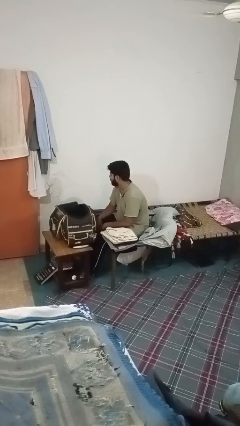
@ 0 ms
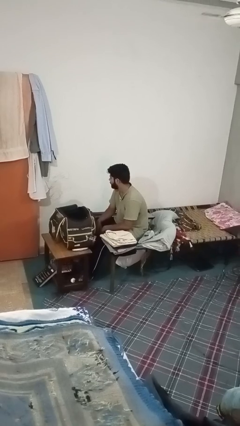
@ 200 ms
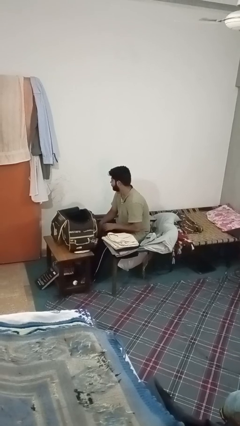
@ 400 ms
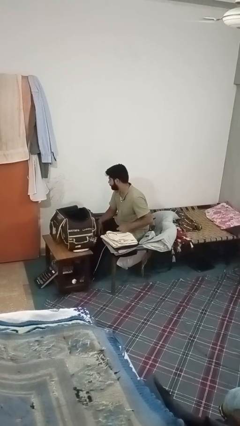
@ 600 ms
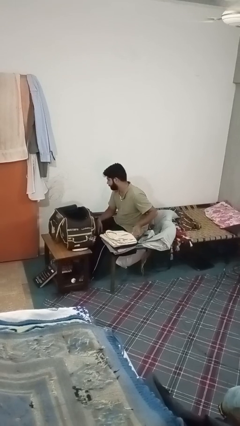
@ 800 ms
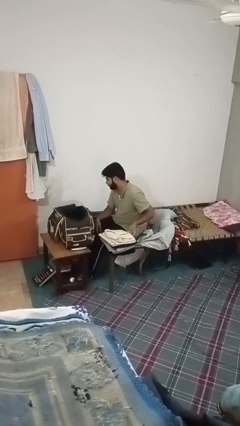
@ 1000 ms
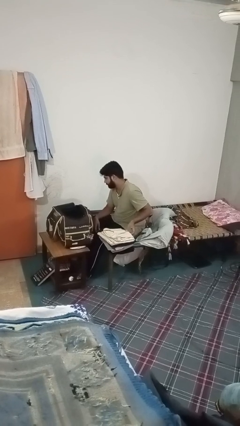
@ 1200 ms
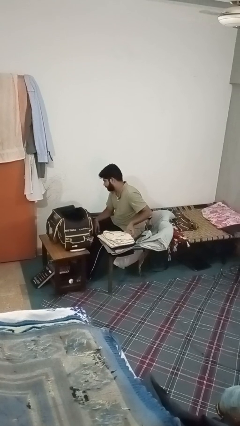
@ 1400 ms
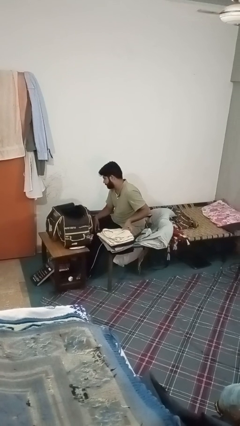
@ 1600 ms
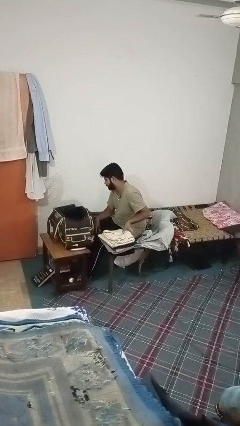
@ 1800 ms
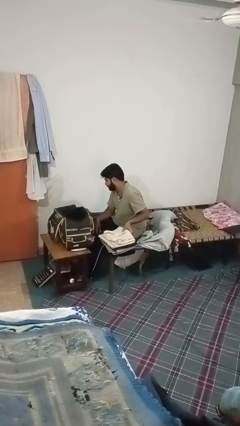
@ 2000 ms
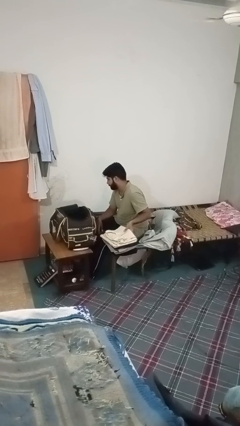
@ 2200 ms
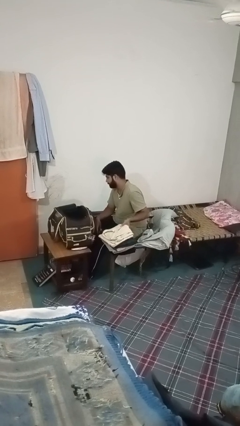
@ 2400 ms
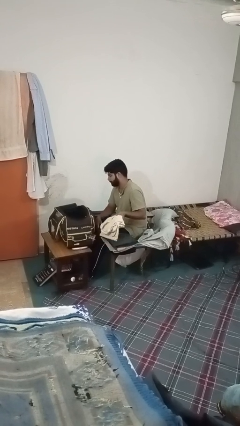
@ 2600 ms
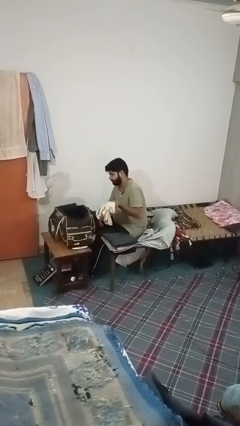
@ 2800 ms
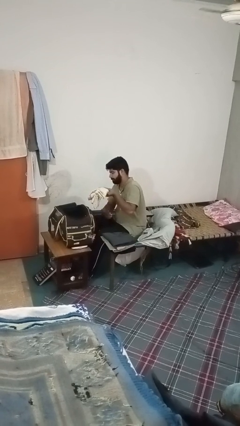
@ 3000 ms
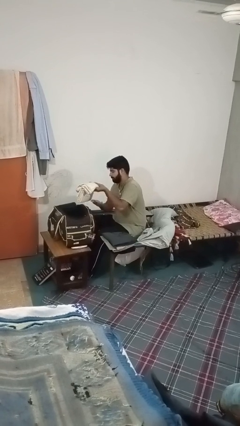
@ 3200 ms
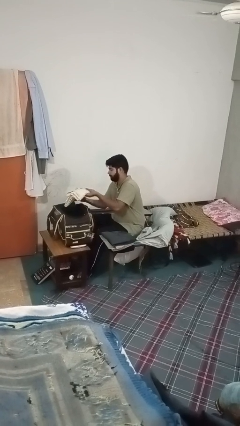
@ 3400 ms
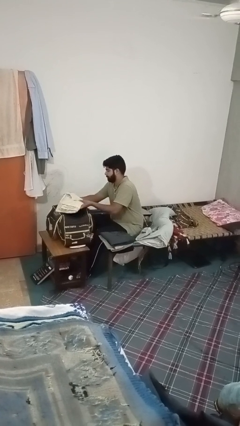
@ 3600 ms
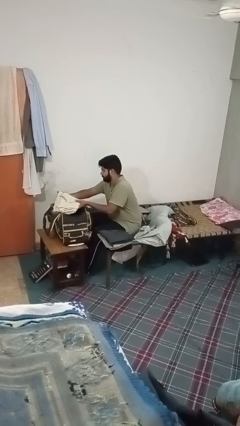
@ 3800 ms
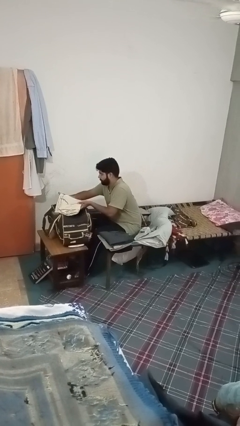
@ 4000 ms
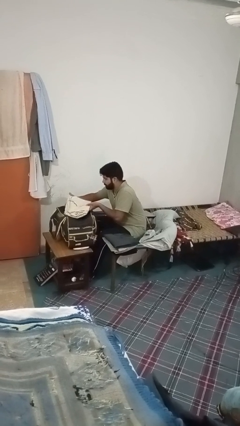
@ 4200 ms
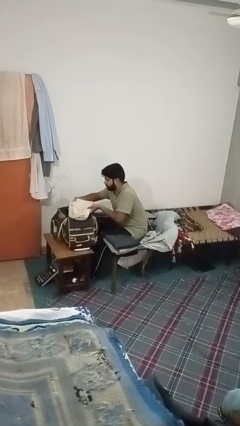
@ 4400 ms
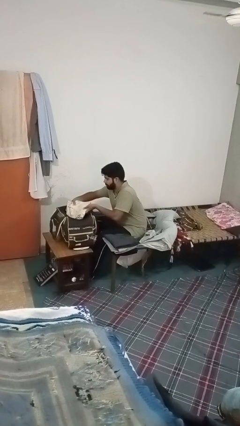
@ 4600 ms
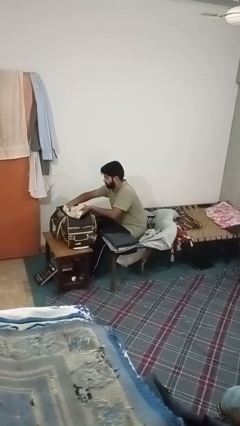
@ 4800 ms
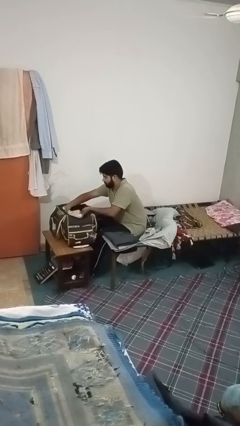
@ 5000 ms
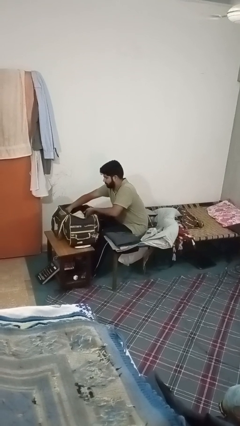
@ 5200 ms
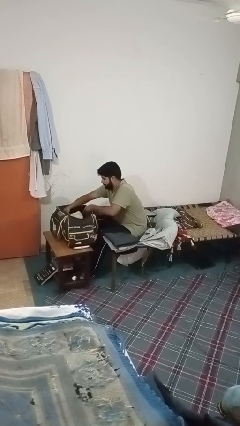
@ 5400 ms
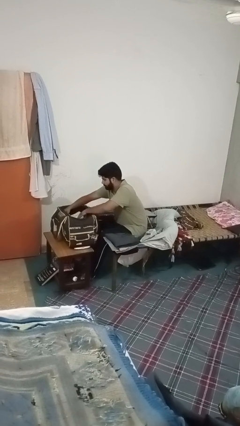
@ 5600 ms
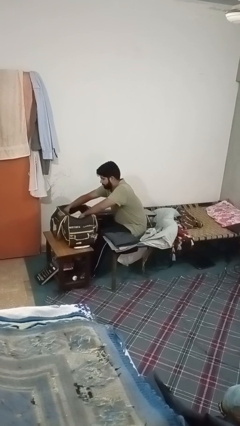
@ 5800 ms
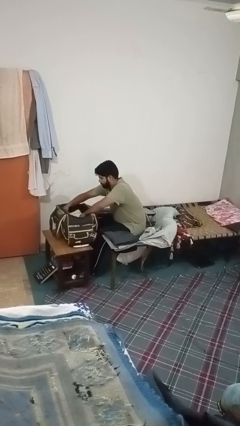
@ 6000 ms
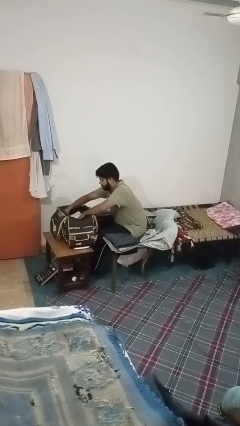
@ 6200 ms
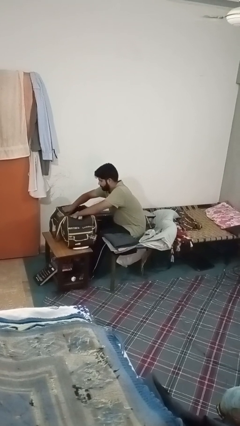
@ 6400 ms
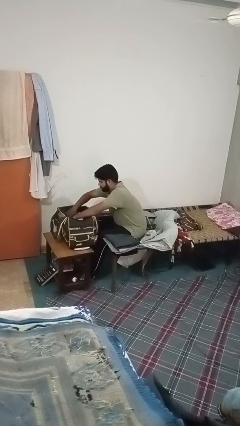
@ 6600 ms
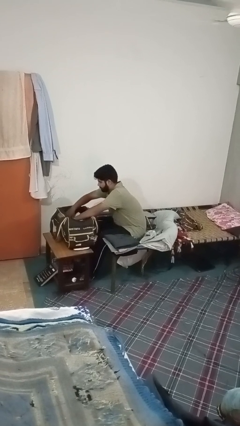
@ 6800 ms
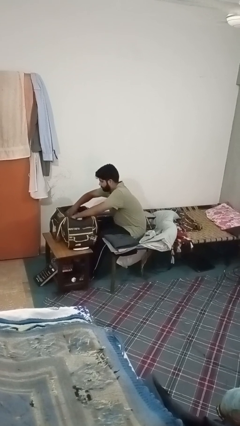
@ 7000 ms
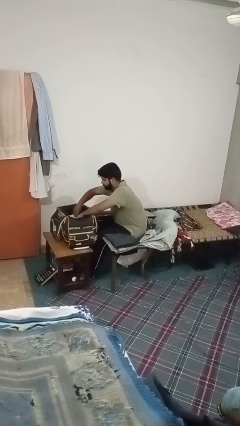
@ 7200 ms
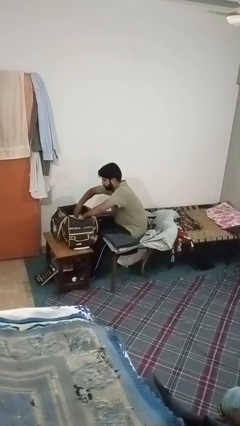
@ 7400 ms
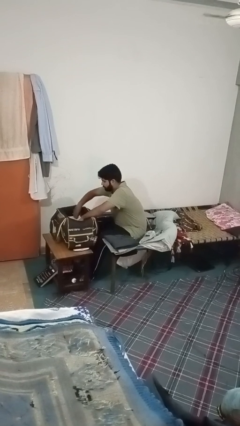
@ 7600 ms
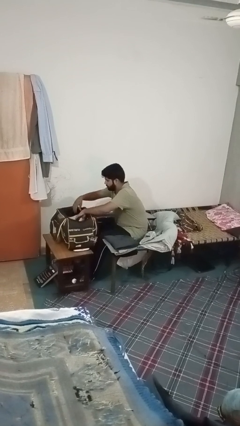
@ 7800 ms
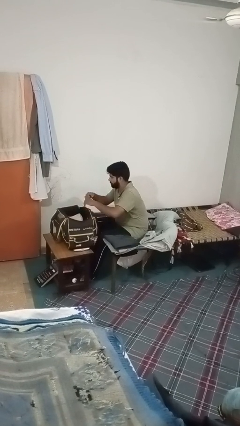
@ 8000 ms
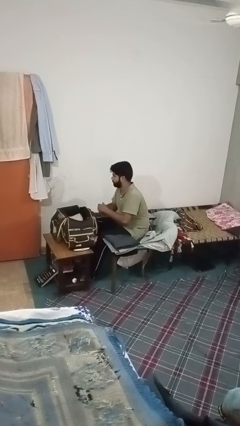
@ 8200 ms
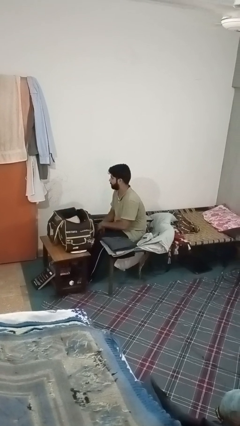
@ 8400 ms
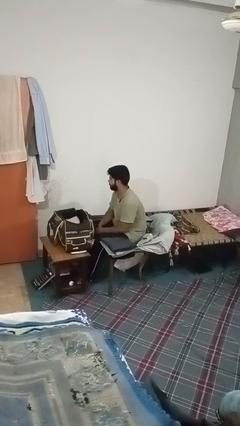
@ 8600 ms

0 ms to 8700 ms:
person loads clothes into suitcase

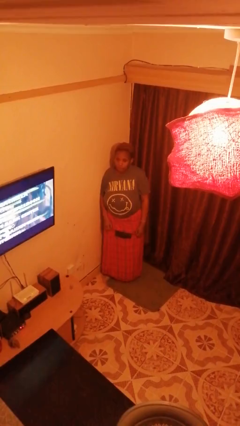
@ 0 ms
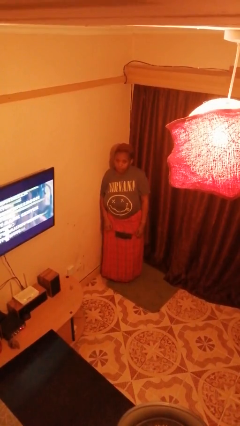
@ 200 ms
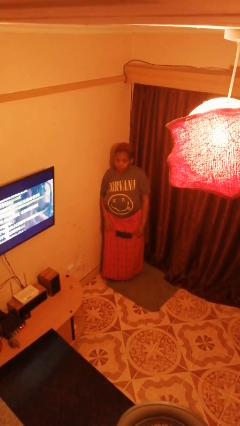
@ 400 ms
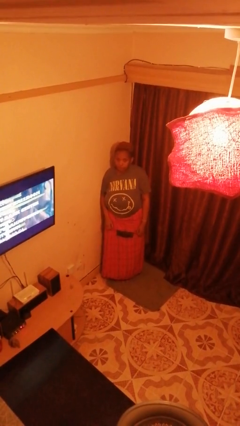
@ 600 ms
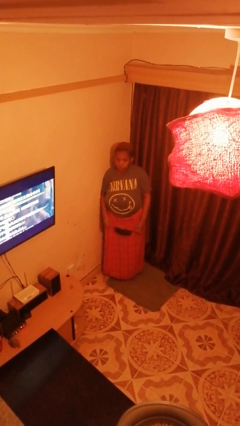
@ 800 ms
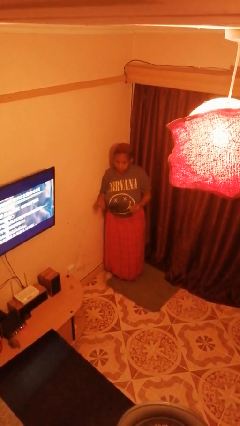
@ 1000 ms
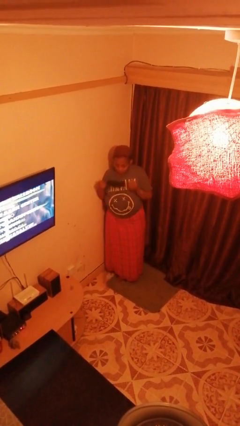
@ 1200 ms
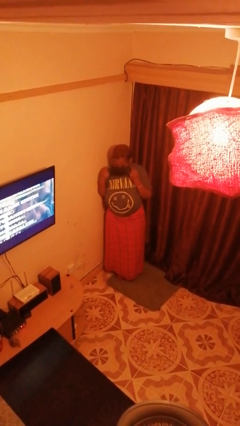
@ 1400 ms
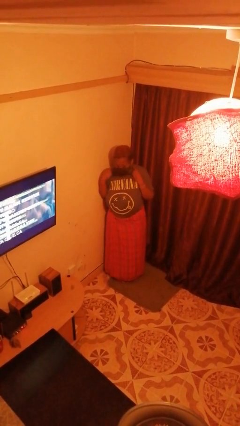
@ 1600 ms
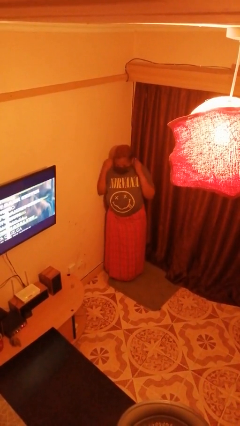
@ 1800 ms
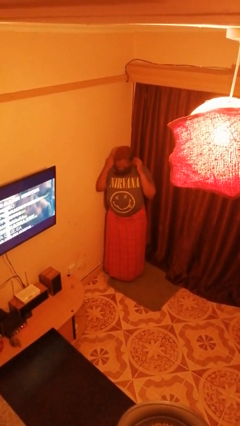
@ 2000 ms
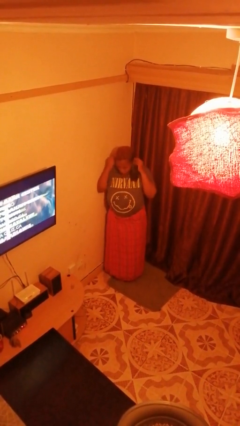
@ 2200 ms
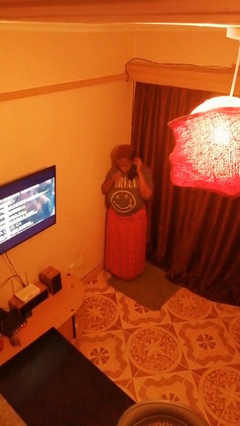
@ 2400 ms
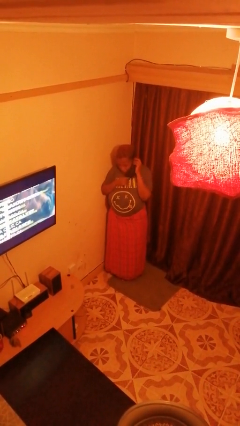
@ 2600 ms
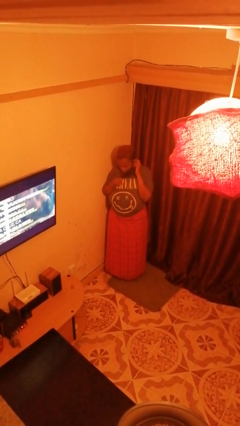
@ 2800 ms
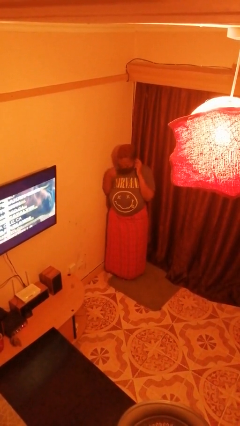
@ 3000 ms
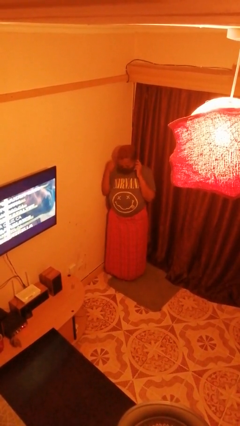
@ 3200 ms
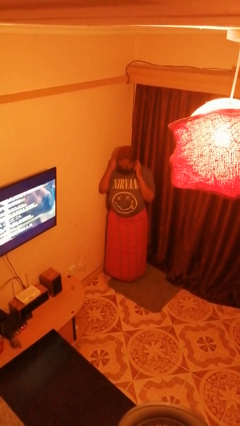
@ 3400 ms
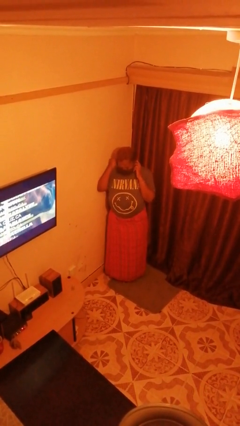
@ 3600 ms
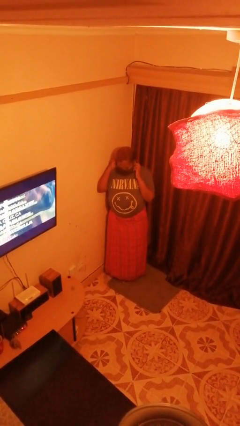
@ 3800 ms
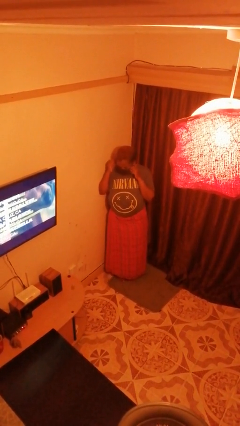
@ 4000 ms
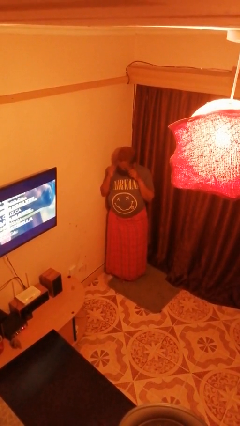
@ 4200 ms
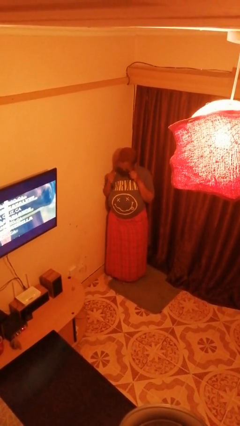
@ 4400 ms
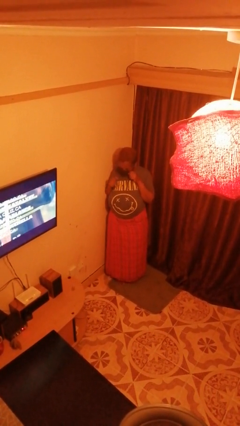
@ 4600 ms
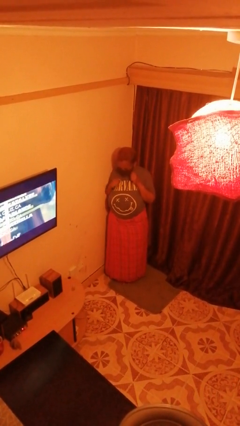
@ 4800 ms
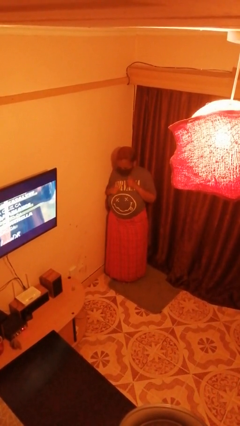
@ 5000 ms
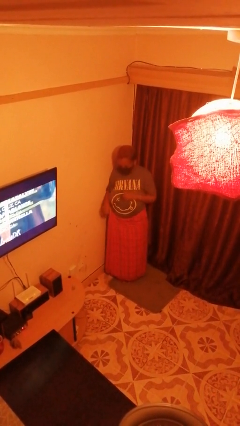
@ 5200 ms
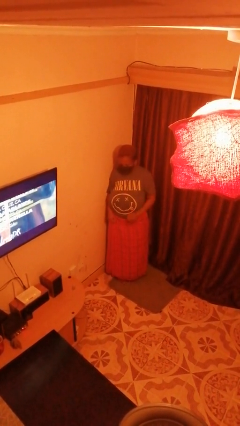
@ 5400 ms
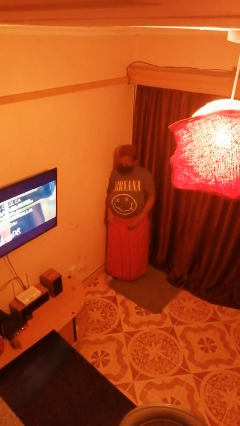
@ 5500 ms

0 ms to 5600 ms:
person puts on facemask

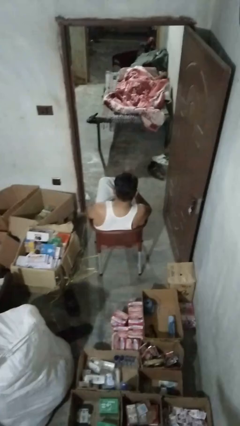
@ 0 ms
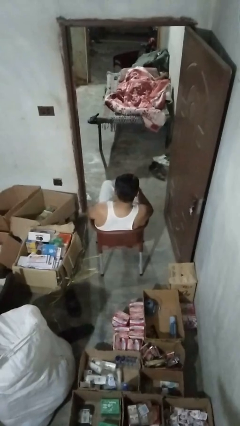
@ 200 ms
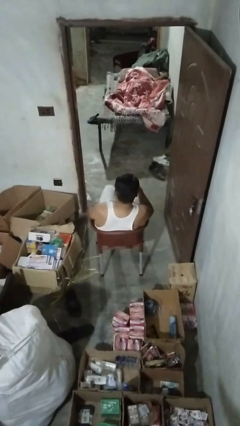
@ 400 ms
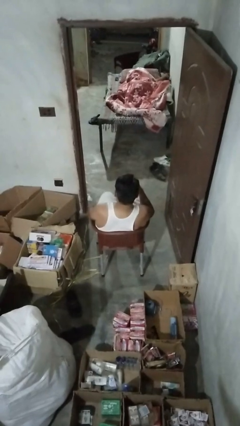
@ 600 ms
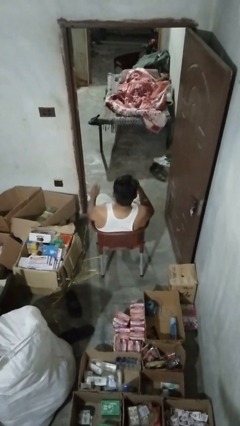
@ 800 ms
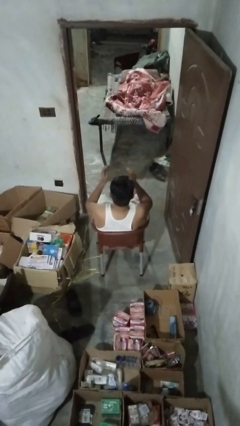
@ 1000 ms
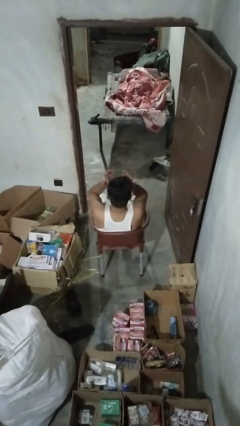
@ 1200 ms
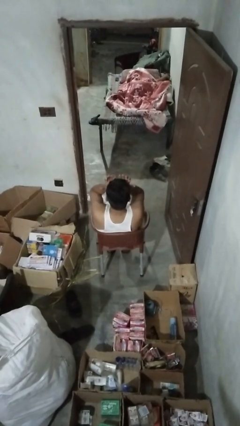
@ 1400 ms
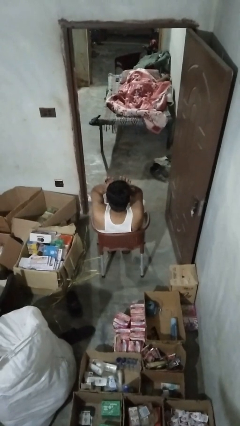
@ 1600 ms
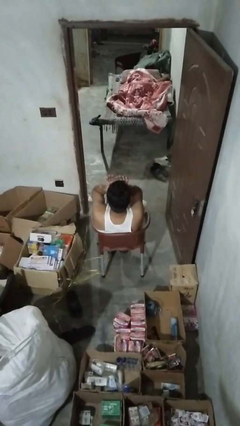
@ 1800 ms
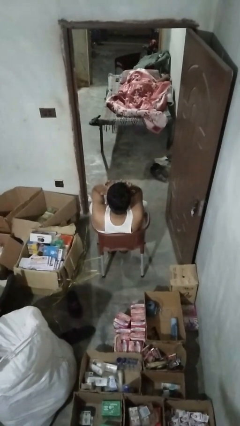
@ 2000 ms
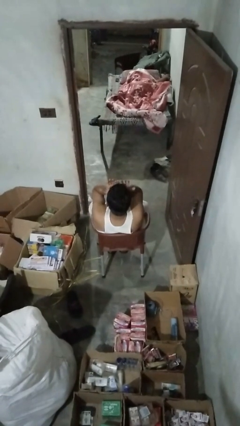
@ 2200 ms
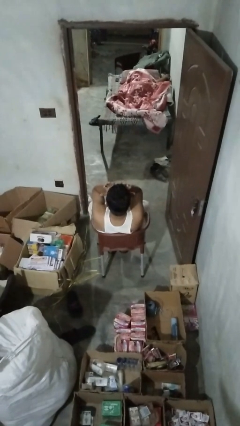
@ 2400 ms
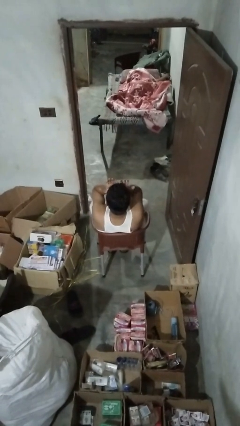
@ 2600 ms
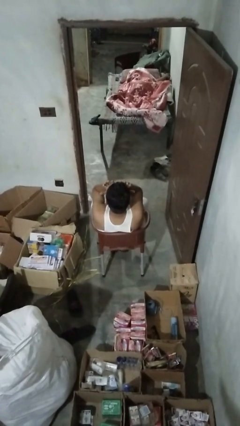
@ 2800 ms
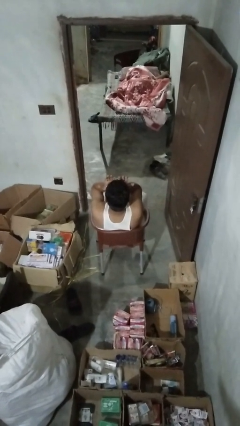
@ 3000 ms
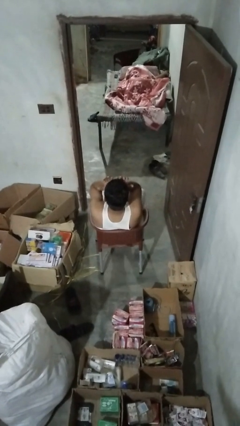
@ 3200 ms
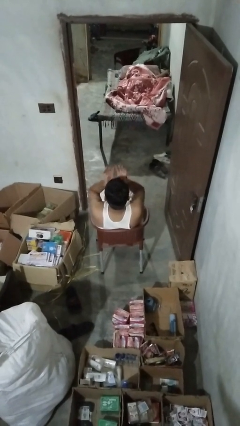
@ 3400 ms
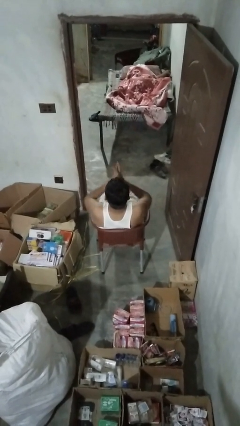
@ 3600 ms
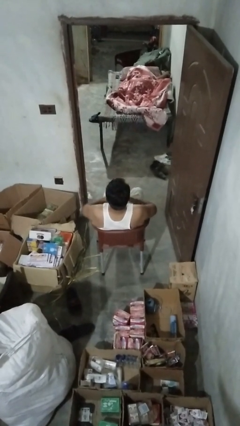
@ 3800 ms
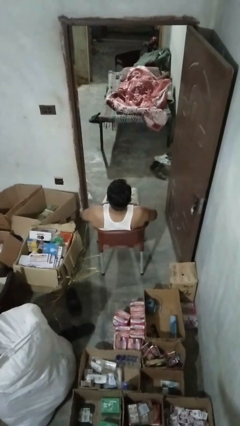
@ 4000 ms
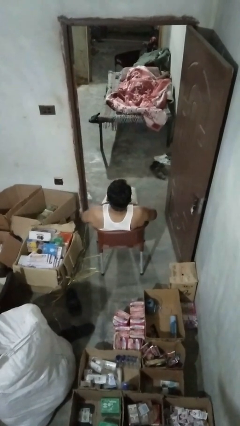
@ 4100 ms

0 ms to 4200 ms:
person rubs eyes
